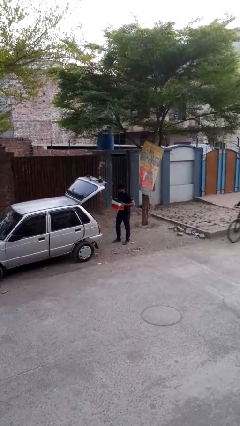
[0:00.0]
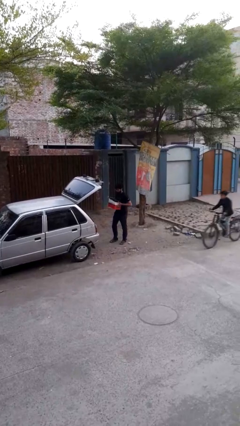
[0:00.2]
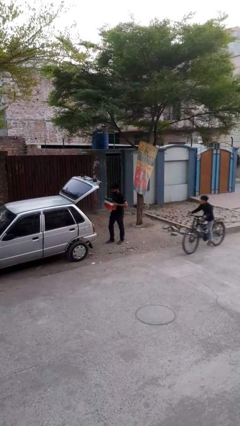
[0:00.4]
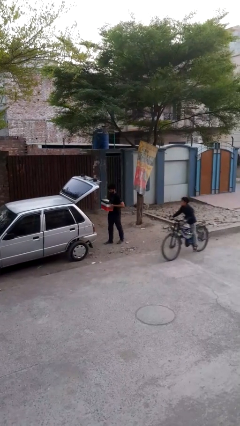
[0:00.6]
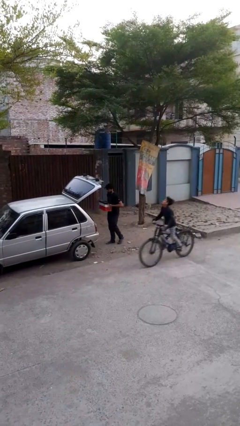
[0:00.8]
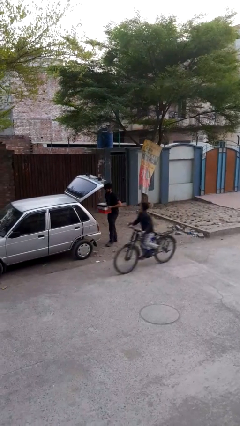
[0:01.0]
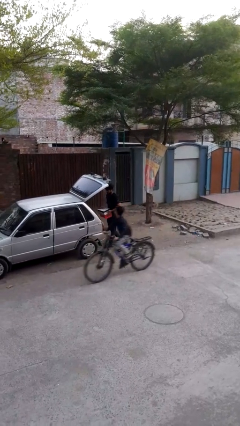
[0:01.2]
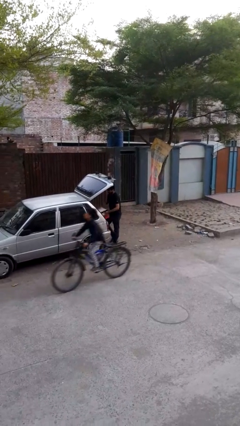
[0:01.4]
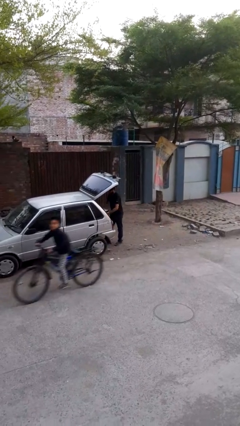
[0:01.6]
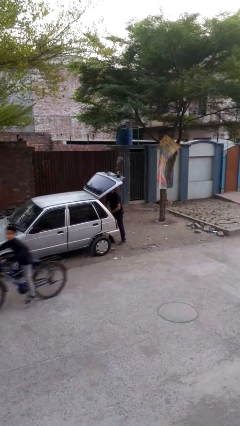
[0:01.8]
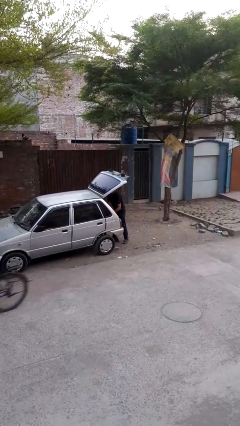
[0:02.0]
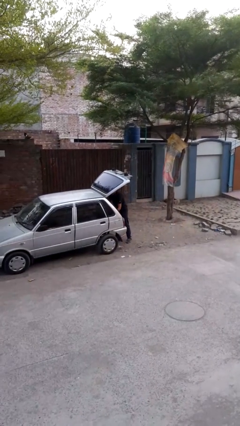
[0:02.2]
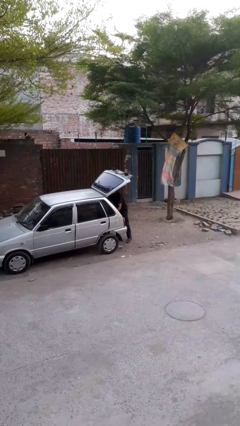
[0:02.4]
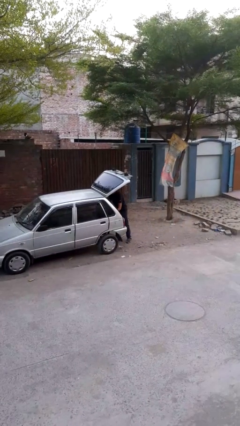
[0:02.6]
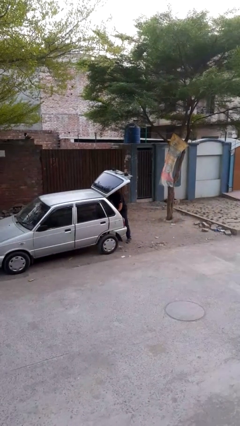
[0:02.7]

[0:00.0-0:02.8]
person loads car

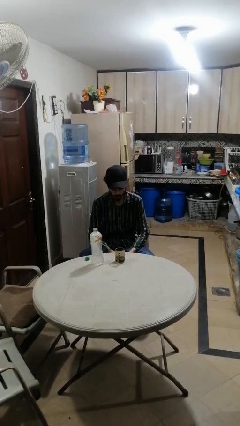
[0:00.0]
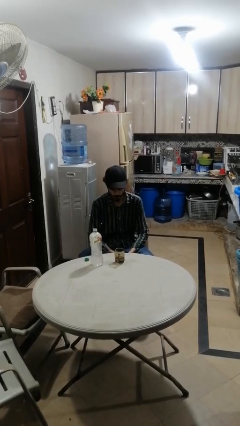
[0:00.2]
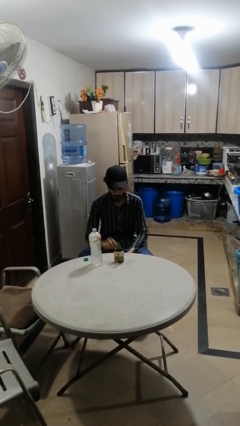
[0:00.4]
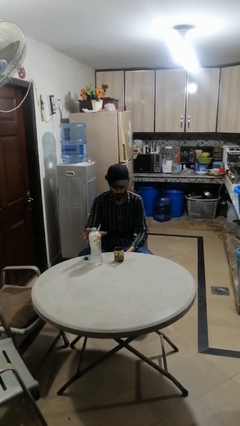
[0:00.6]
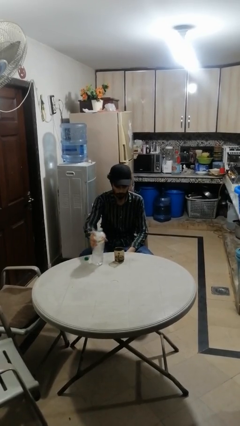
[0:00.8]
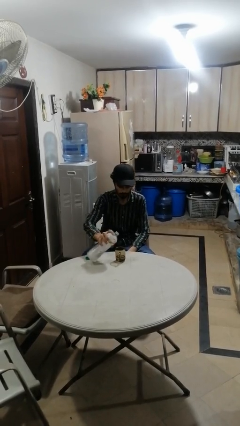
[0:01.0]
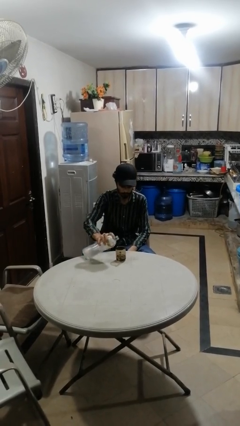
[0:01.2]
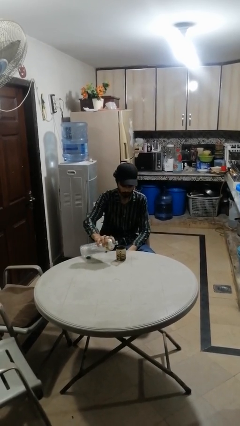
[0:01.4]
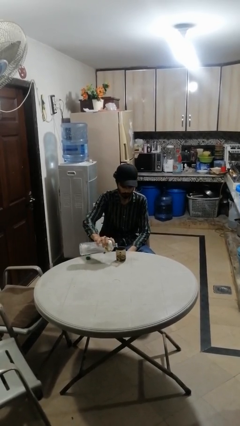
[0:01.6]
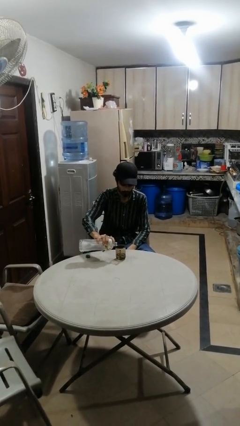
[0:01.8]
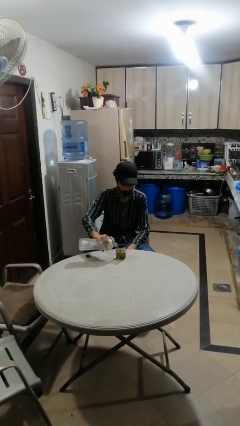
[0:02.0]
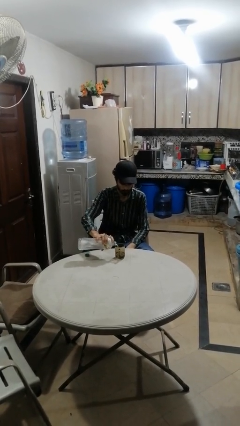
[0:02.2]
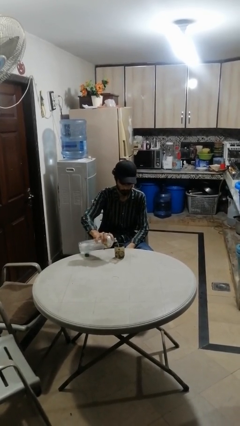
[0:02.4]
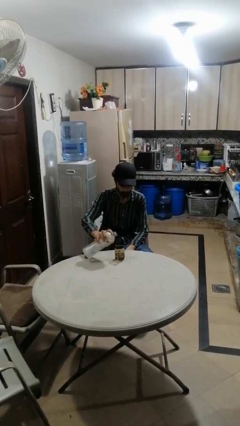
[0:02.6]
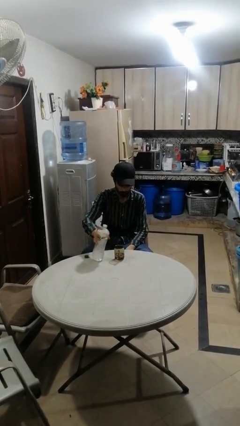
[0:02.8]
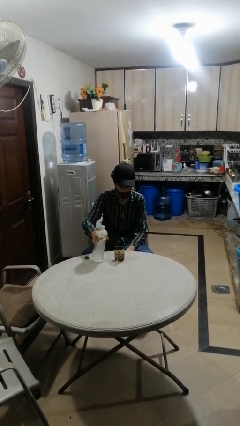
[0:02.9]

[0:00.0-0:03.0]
person pours liquid into cup

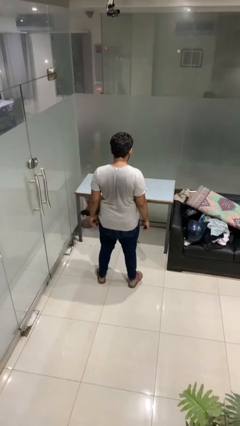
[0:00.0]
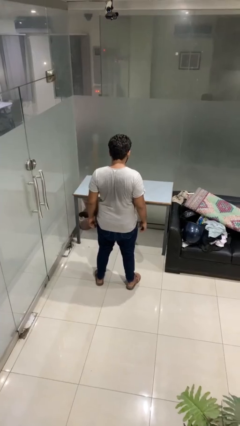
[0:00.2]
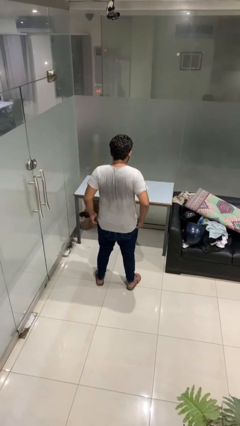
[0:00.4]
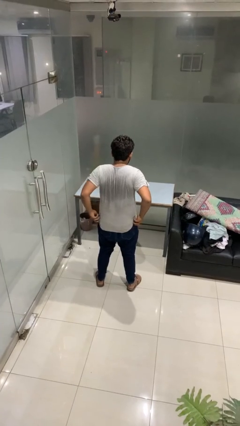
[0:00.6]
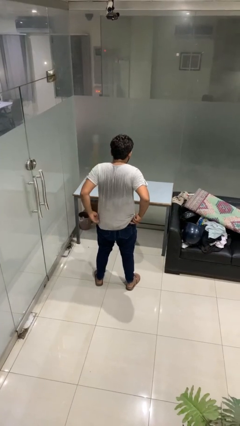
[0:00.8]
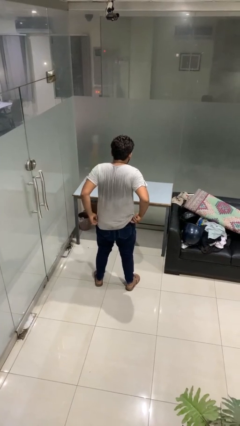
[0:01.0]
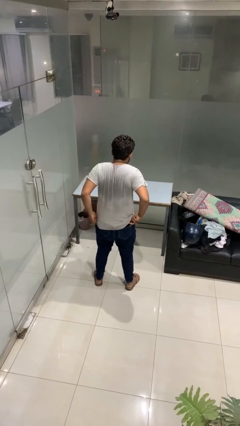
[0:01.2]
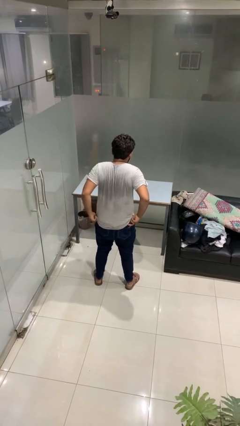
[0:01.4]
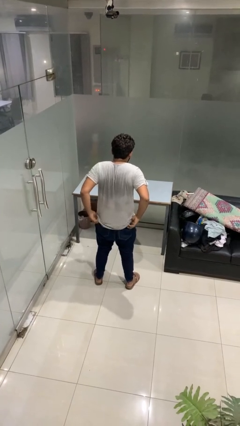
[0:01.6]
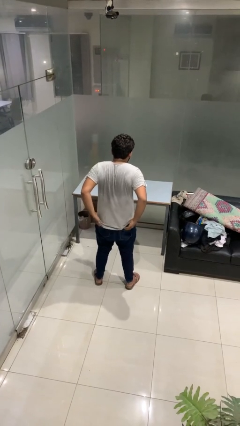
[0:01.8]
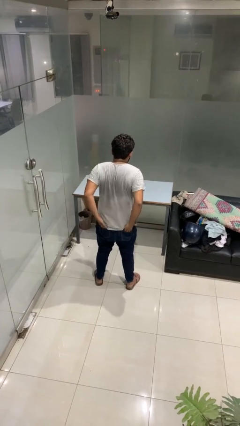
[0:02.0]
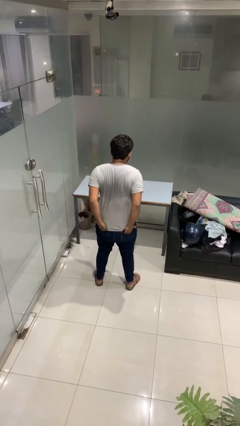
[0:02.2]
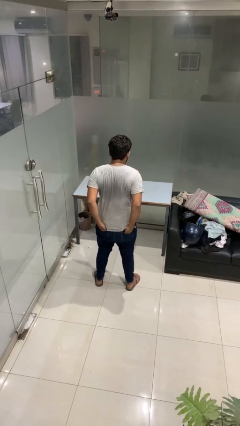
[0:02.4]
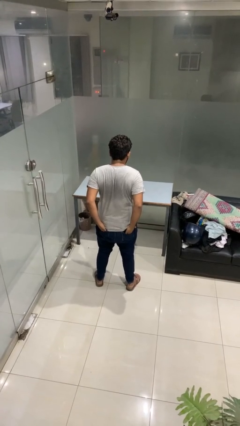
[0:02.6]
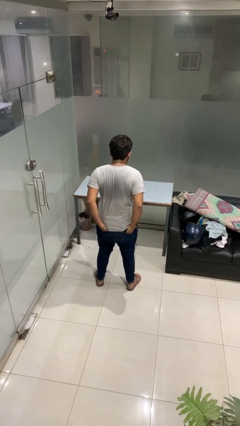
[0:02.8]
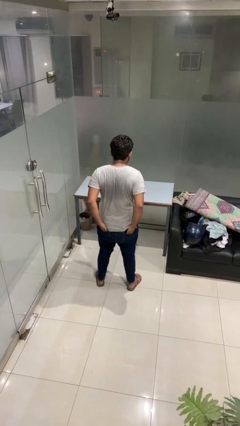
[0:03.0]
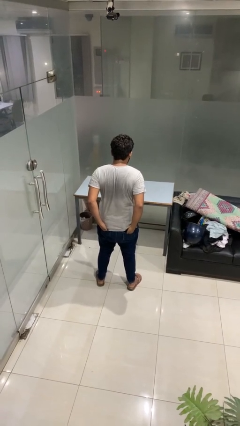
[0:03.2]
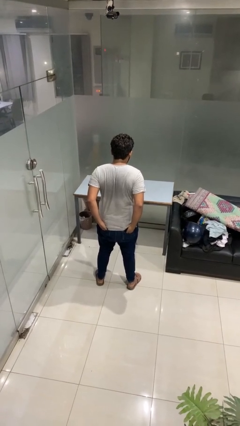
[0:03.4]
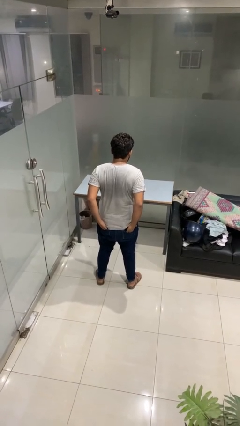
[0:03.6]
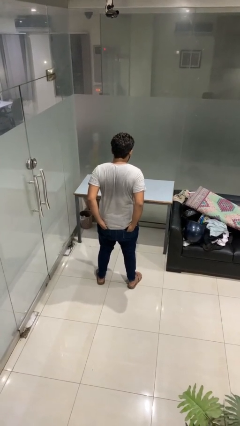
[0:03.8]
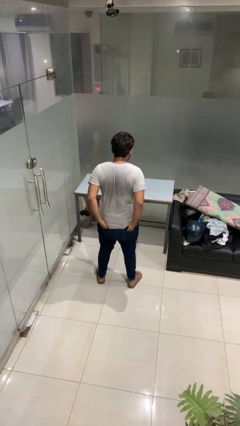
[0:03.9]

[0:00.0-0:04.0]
person puts hands in back pockets

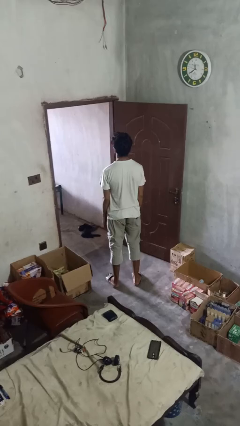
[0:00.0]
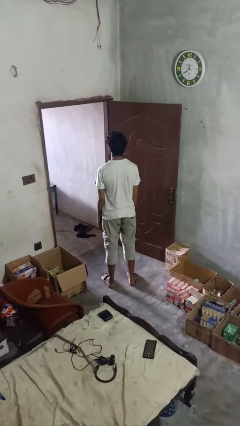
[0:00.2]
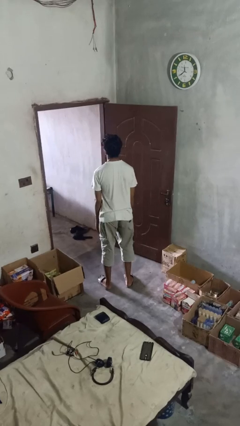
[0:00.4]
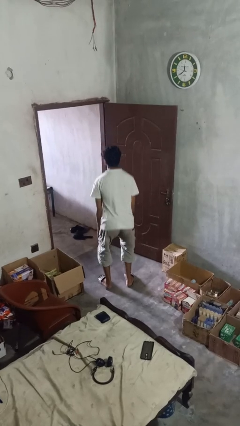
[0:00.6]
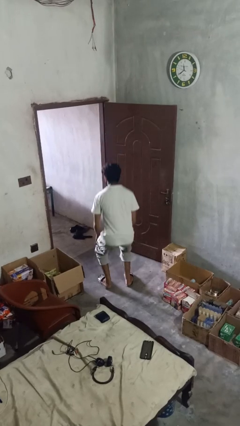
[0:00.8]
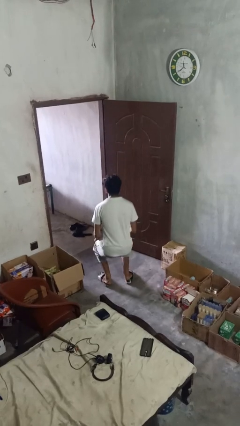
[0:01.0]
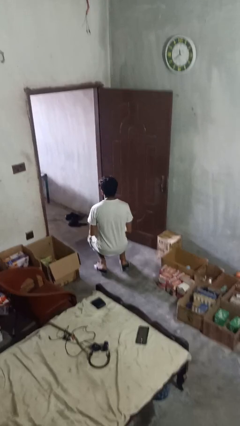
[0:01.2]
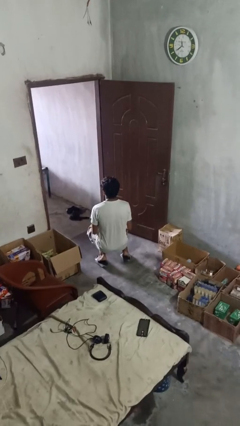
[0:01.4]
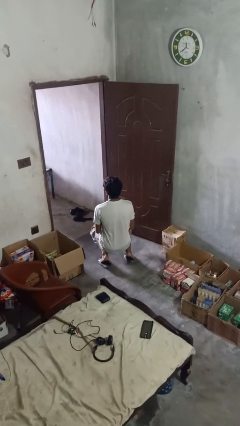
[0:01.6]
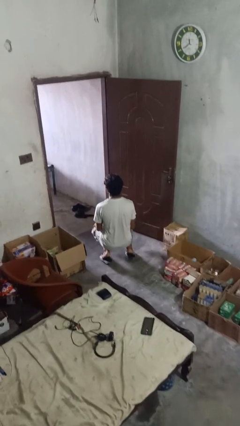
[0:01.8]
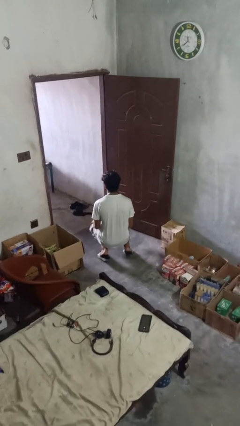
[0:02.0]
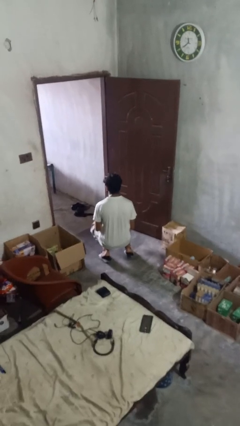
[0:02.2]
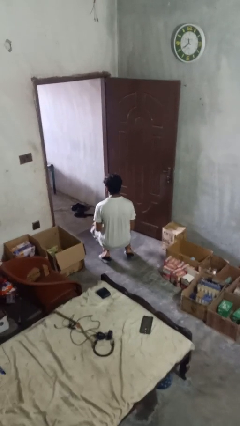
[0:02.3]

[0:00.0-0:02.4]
person kneels

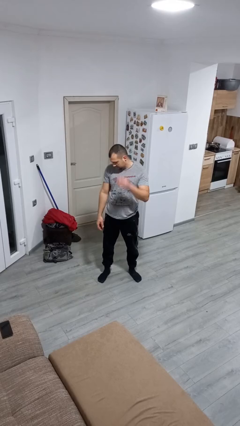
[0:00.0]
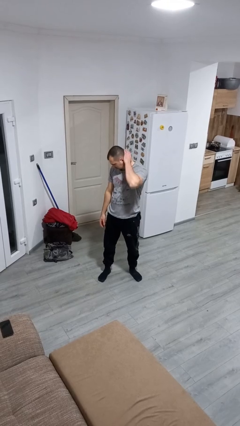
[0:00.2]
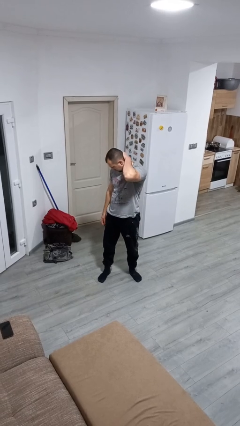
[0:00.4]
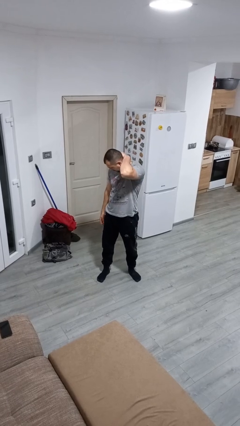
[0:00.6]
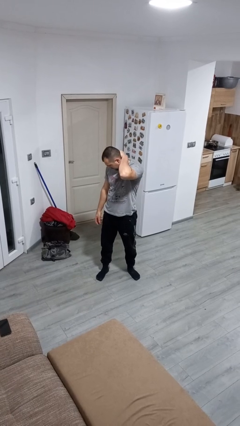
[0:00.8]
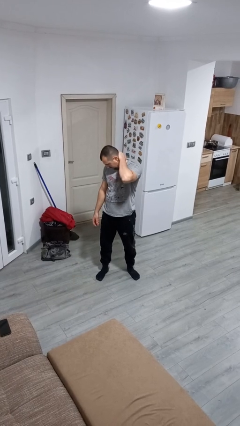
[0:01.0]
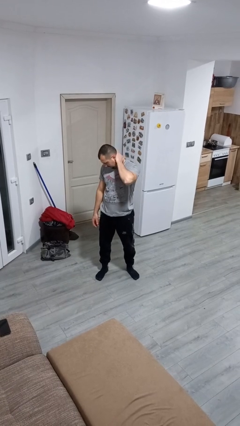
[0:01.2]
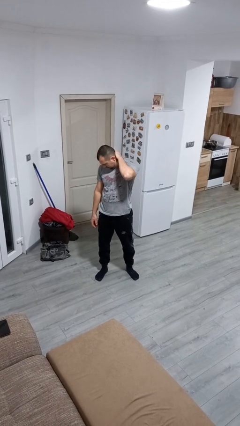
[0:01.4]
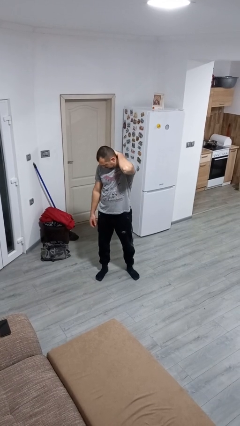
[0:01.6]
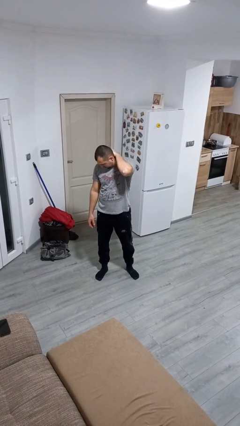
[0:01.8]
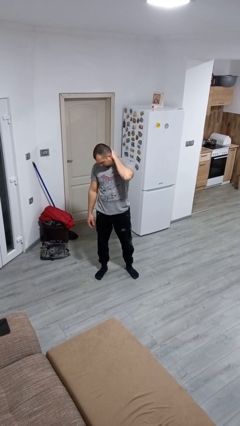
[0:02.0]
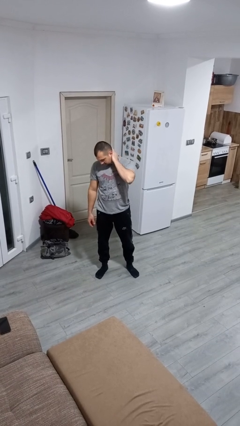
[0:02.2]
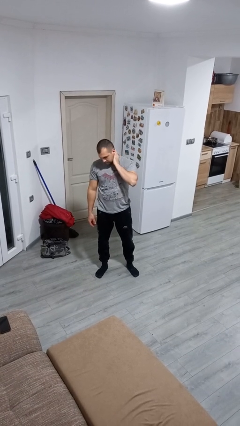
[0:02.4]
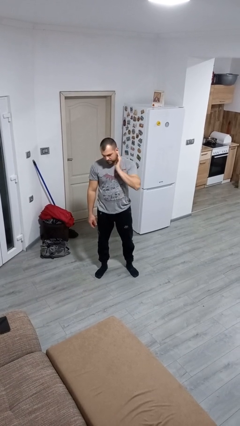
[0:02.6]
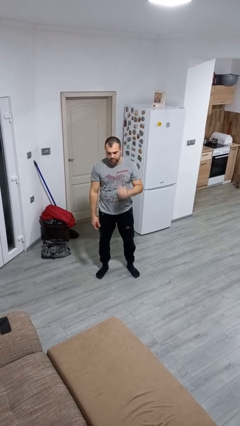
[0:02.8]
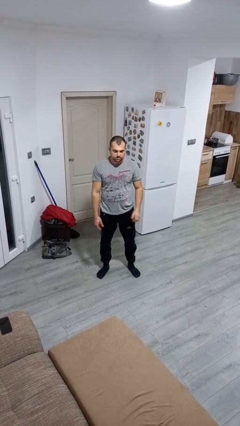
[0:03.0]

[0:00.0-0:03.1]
person rubs neck

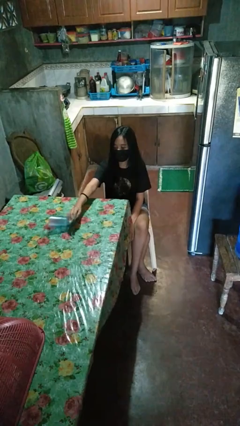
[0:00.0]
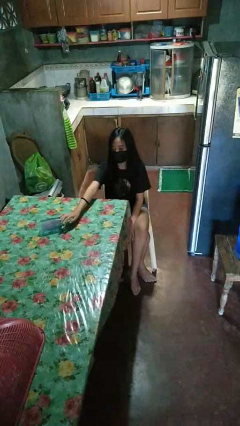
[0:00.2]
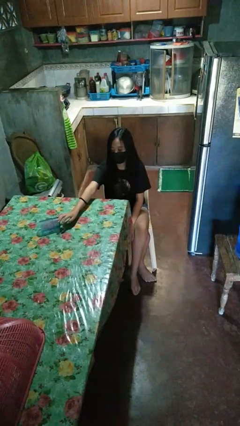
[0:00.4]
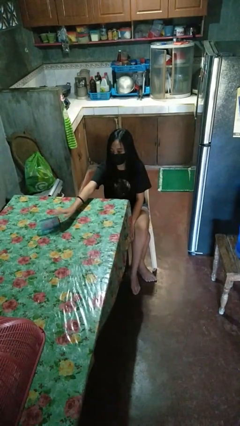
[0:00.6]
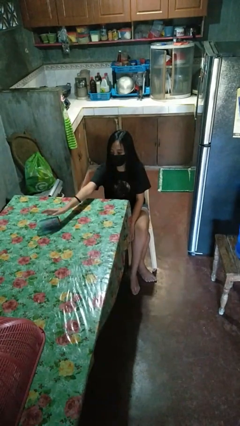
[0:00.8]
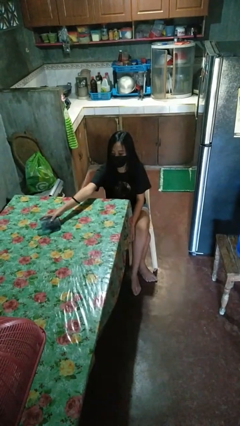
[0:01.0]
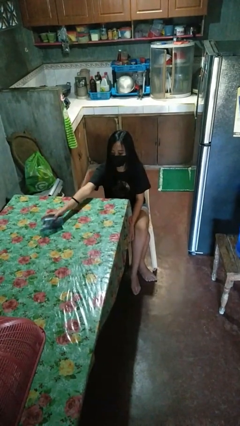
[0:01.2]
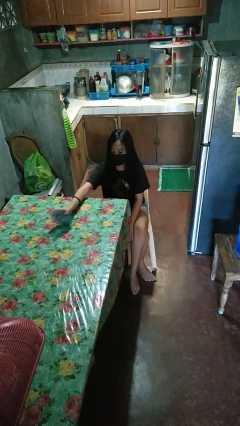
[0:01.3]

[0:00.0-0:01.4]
person sets upright glass

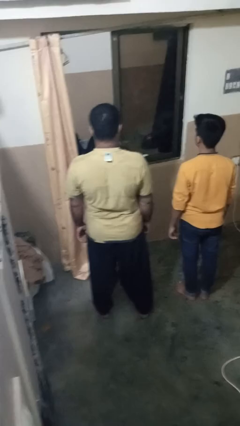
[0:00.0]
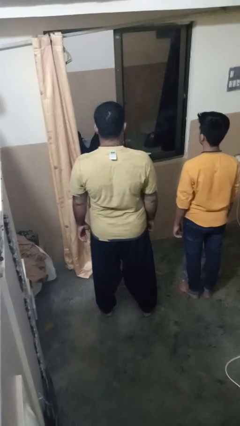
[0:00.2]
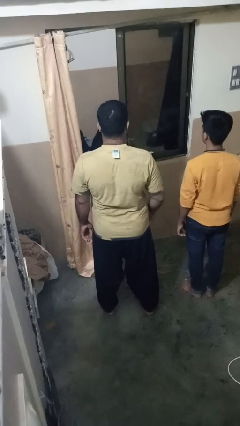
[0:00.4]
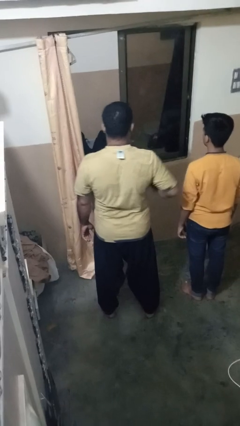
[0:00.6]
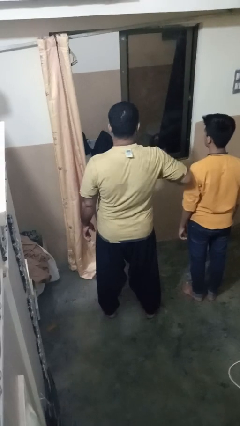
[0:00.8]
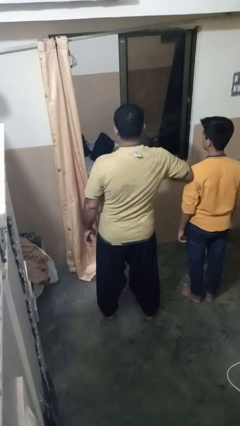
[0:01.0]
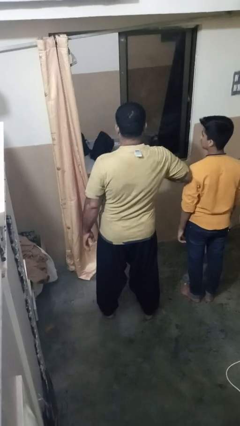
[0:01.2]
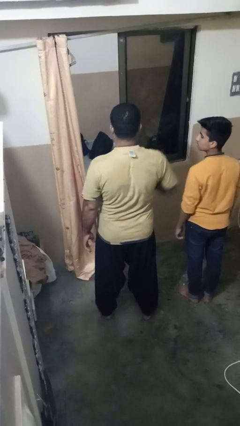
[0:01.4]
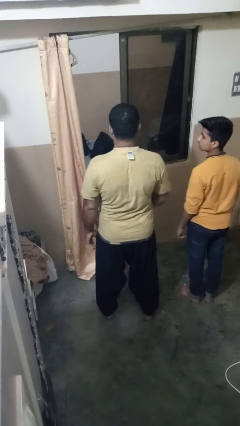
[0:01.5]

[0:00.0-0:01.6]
person nudges person with elbow
